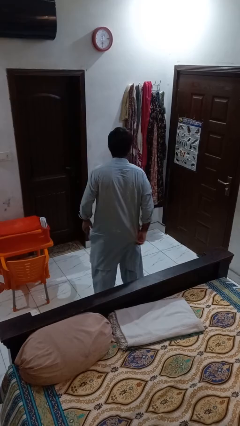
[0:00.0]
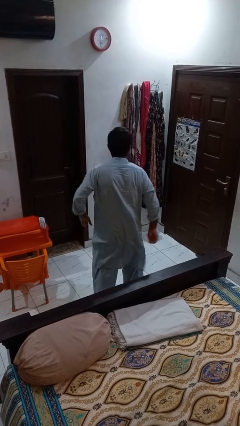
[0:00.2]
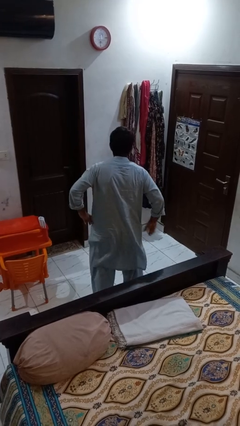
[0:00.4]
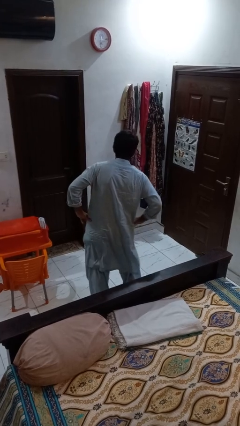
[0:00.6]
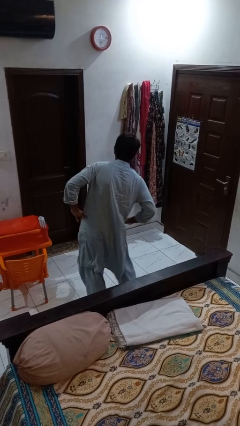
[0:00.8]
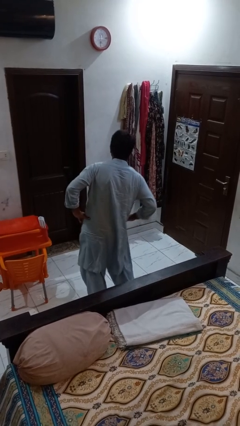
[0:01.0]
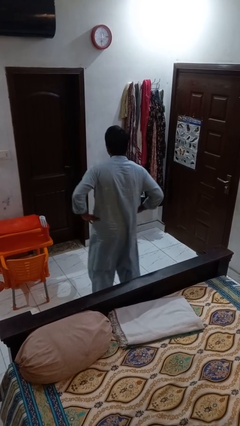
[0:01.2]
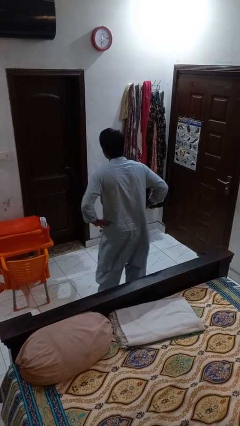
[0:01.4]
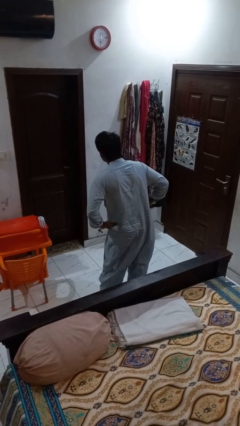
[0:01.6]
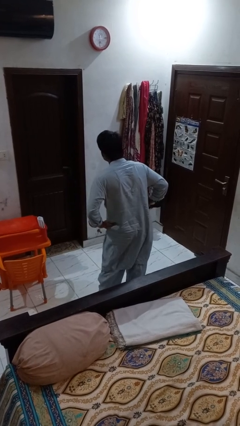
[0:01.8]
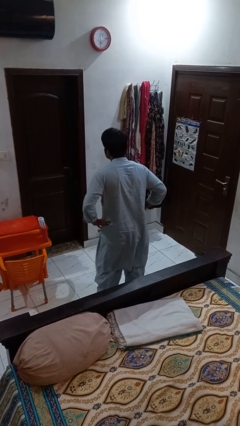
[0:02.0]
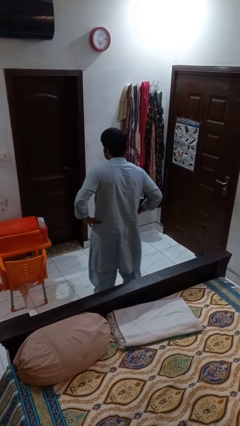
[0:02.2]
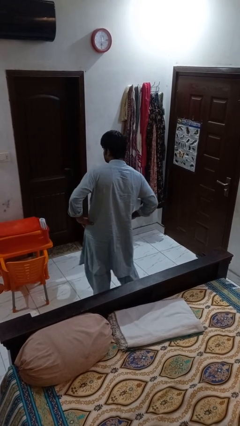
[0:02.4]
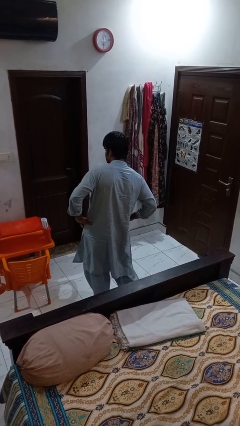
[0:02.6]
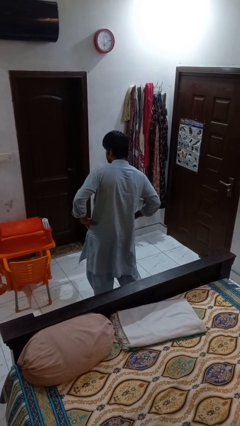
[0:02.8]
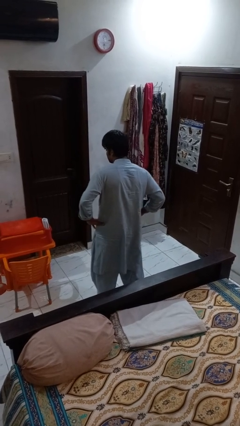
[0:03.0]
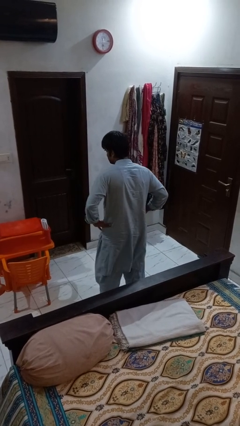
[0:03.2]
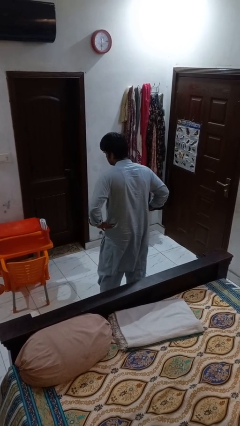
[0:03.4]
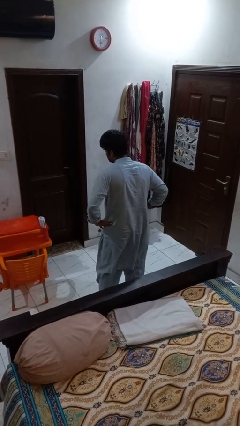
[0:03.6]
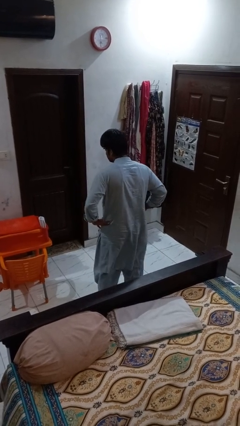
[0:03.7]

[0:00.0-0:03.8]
person wiggles hips

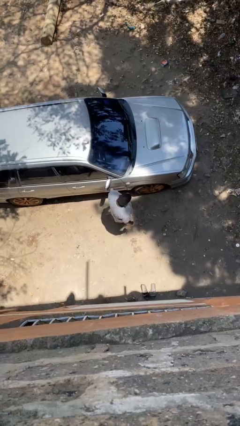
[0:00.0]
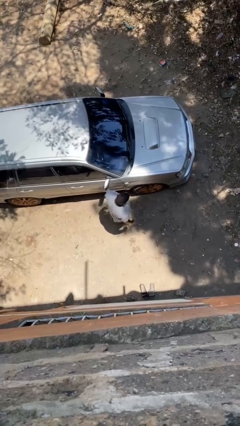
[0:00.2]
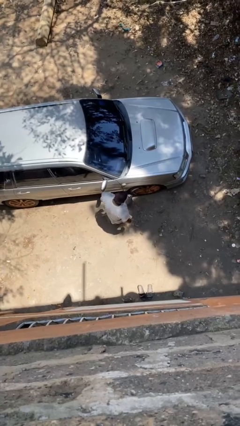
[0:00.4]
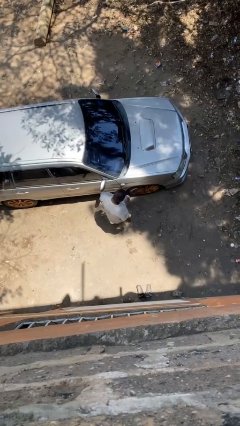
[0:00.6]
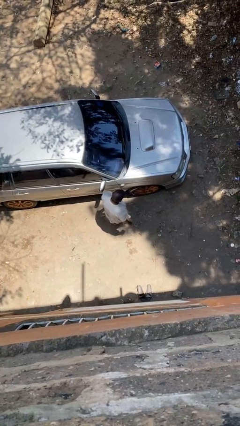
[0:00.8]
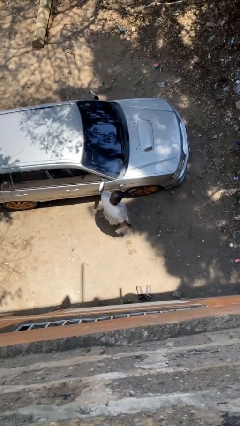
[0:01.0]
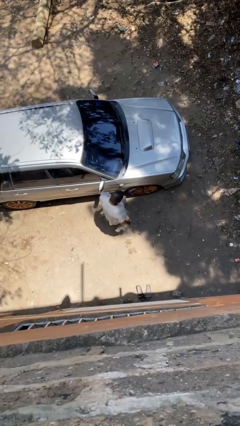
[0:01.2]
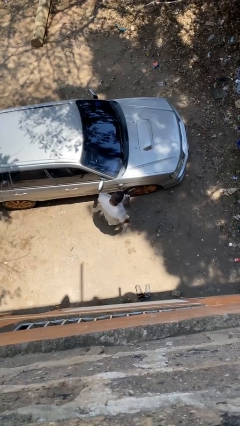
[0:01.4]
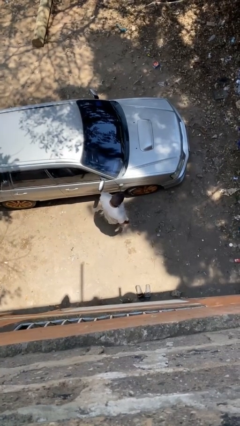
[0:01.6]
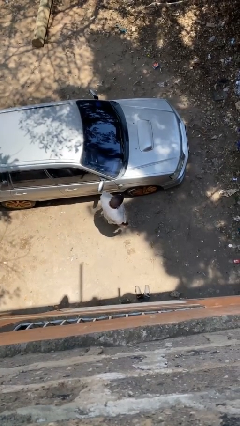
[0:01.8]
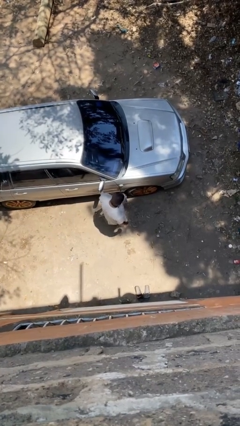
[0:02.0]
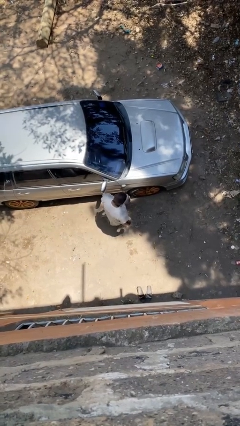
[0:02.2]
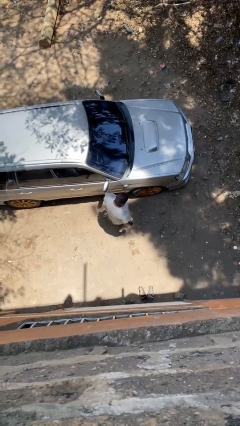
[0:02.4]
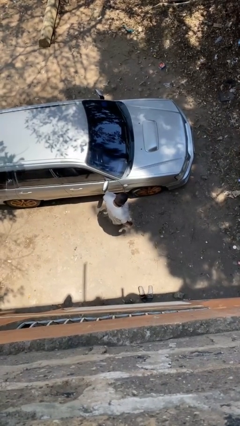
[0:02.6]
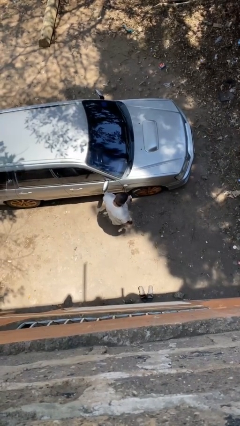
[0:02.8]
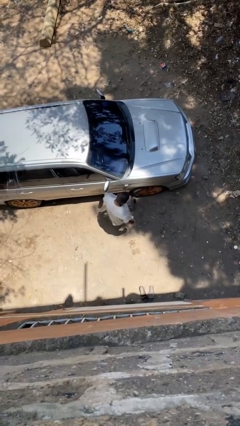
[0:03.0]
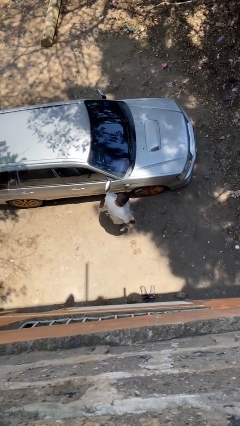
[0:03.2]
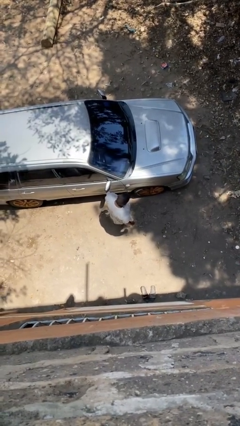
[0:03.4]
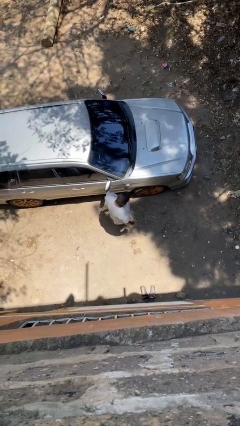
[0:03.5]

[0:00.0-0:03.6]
person kicks car tires

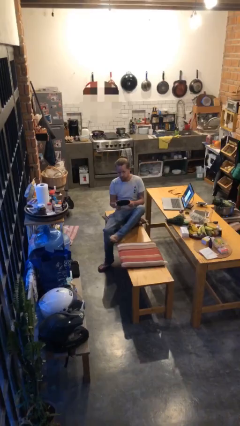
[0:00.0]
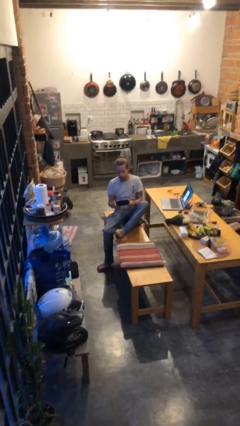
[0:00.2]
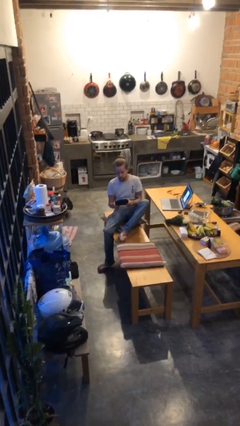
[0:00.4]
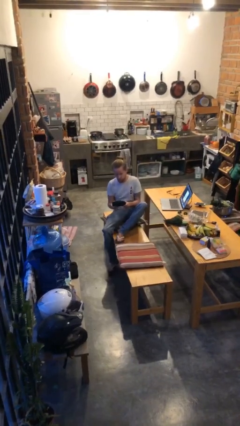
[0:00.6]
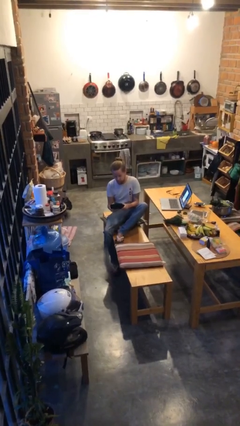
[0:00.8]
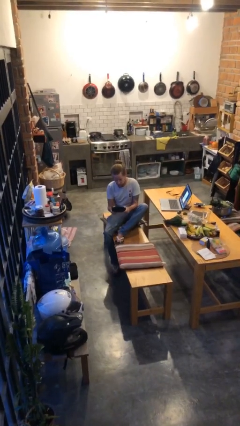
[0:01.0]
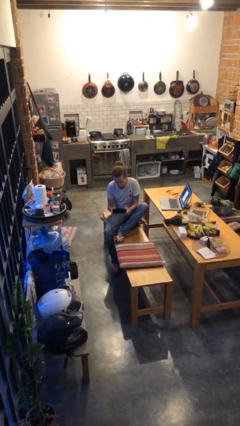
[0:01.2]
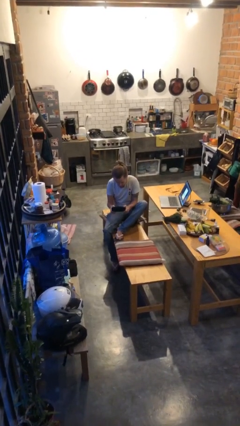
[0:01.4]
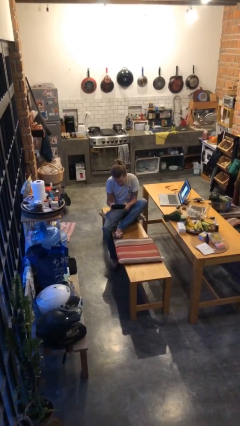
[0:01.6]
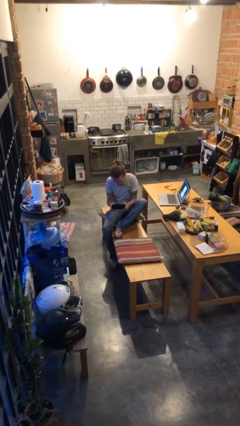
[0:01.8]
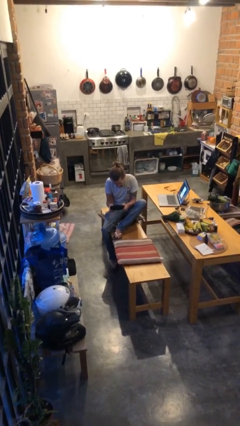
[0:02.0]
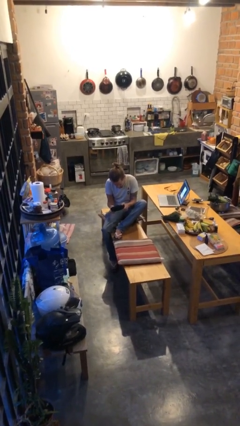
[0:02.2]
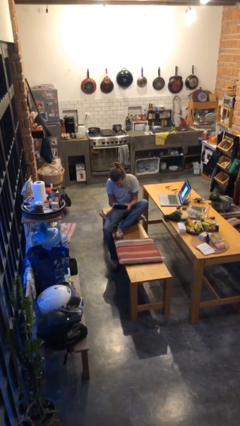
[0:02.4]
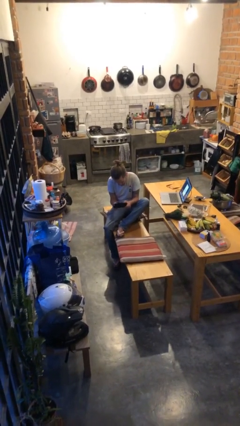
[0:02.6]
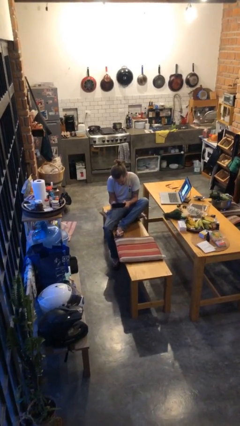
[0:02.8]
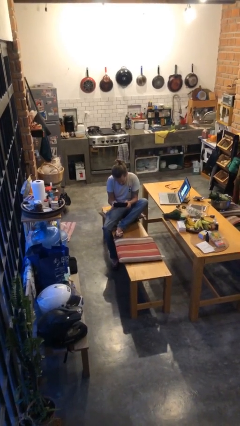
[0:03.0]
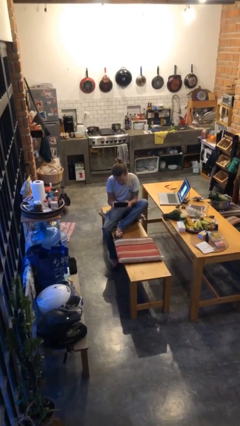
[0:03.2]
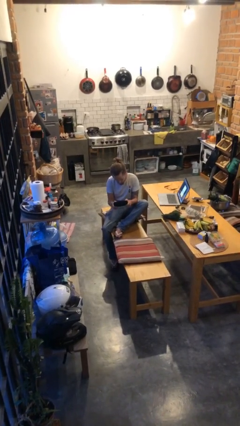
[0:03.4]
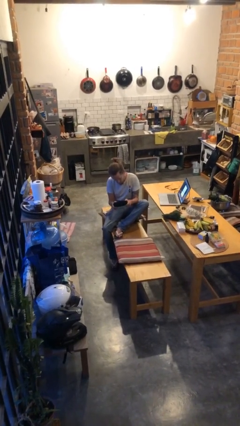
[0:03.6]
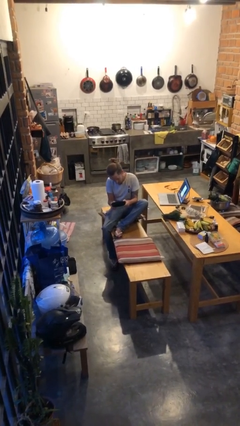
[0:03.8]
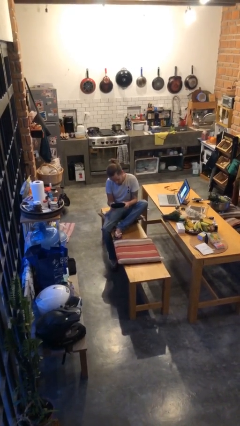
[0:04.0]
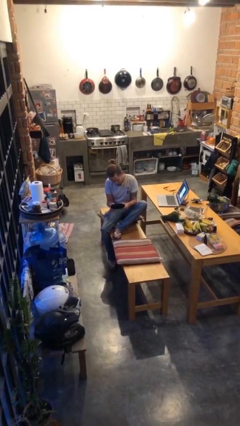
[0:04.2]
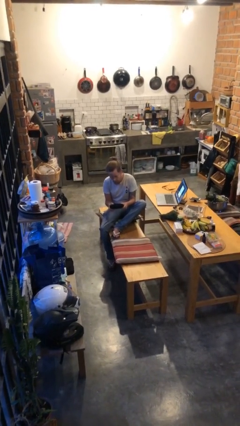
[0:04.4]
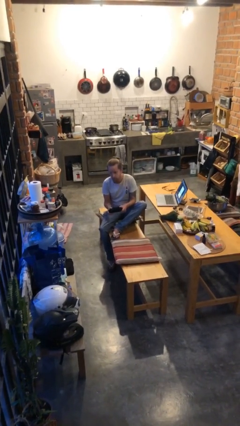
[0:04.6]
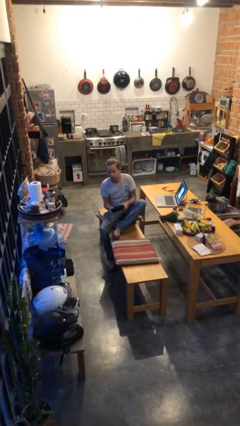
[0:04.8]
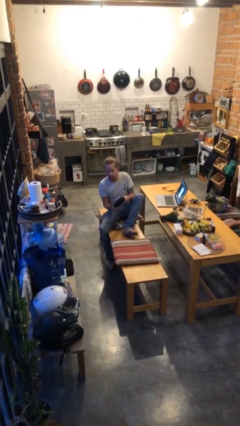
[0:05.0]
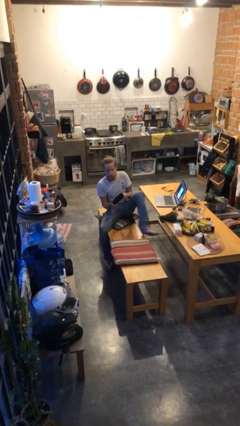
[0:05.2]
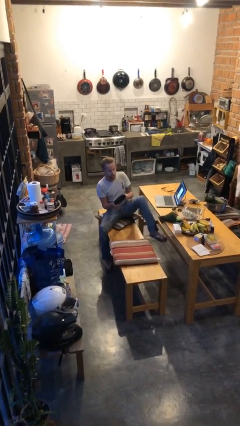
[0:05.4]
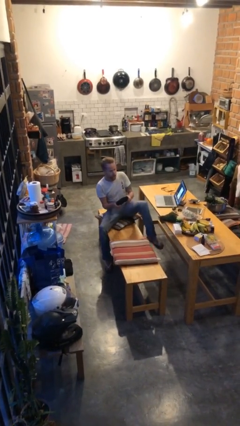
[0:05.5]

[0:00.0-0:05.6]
person interacts with handheld game

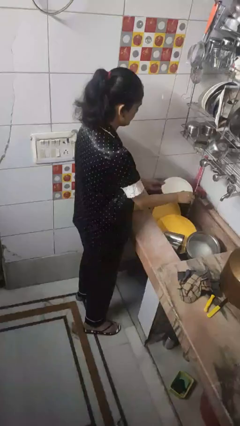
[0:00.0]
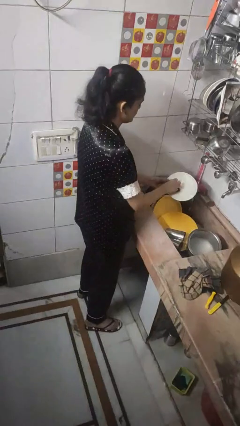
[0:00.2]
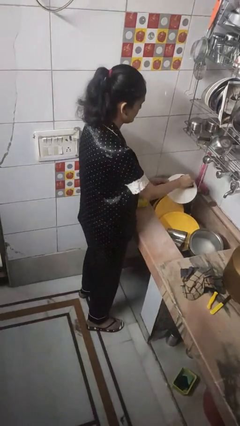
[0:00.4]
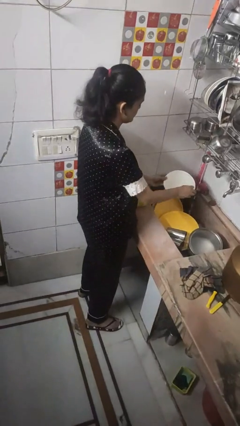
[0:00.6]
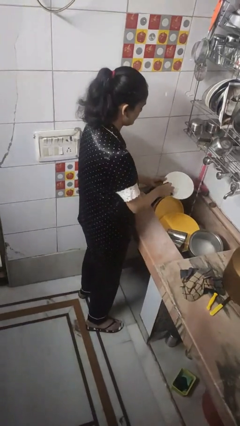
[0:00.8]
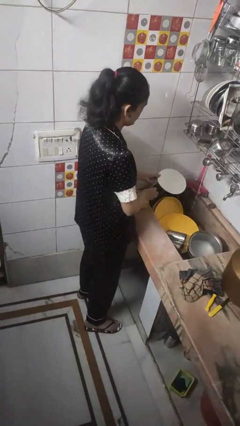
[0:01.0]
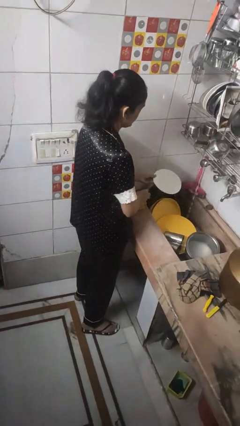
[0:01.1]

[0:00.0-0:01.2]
person washes dish

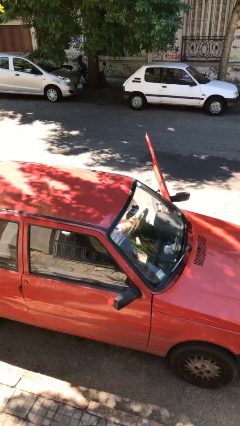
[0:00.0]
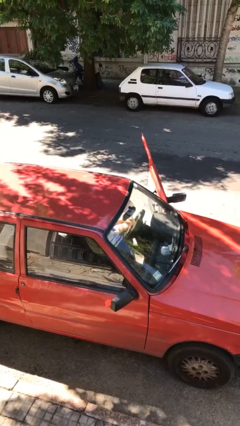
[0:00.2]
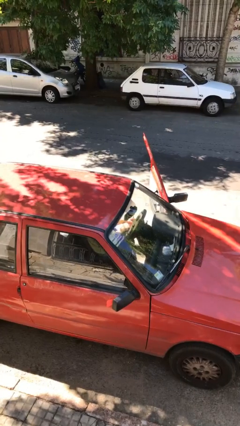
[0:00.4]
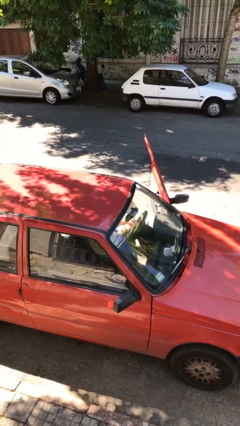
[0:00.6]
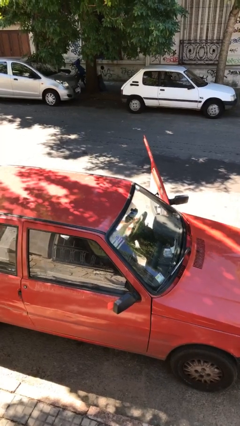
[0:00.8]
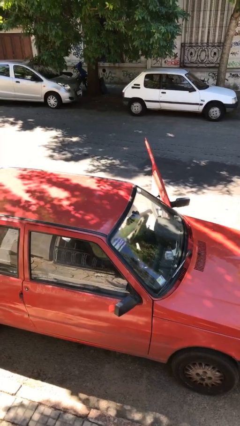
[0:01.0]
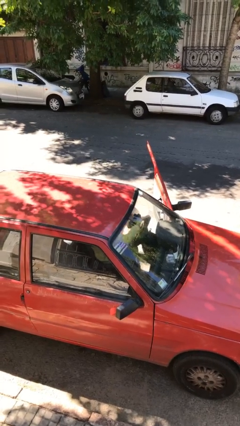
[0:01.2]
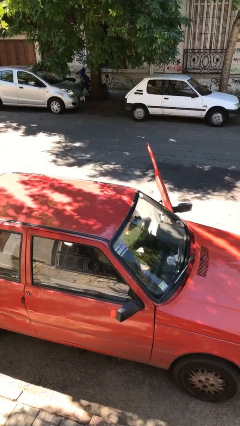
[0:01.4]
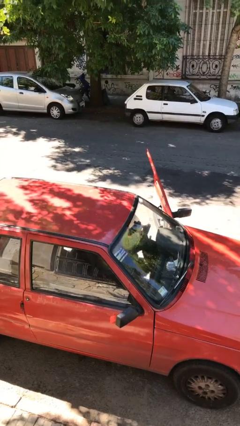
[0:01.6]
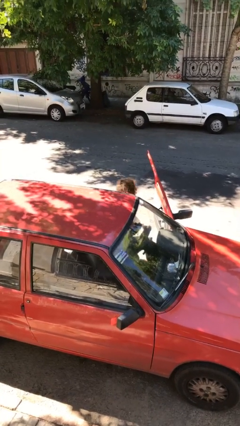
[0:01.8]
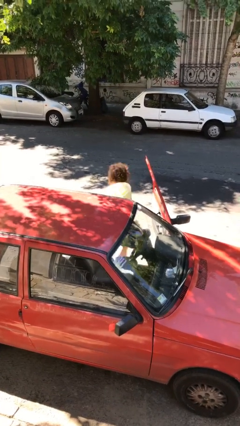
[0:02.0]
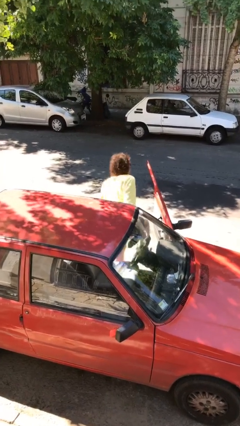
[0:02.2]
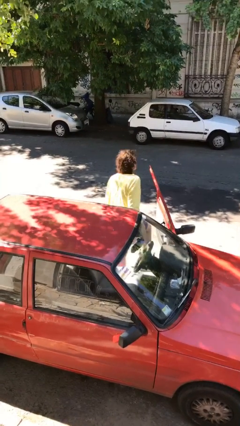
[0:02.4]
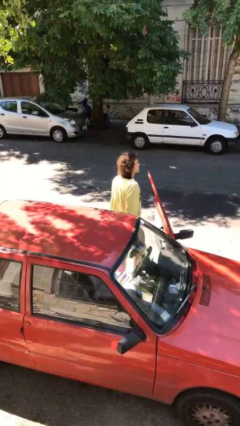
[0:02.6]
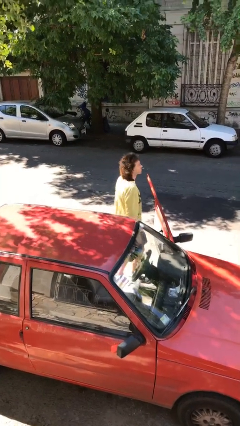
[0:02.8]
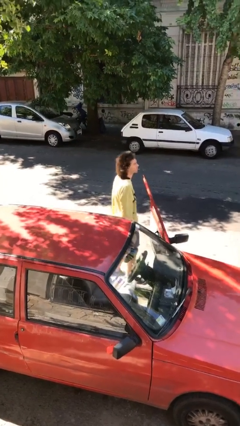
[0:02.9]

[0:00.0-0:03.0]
person exits car

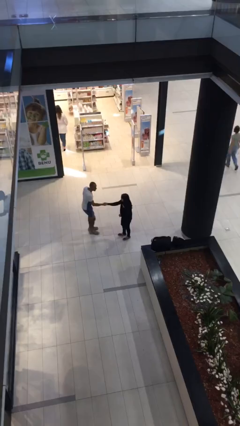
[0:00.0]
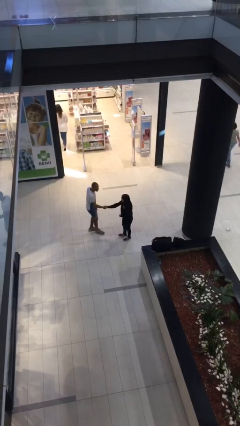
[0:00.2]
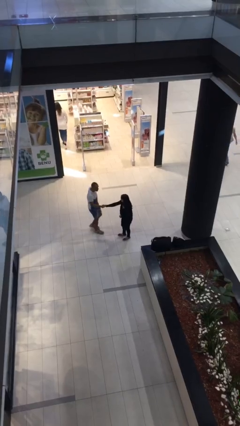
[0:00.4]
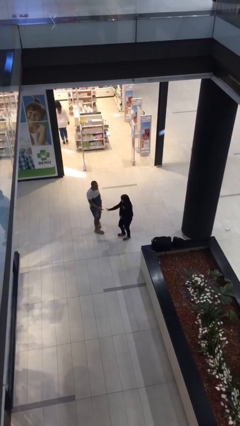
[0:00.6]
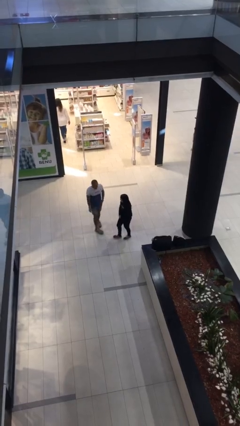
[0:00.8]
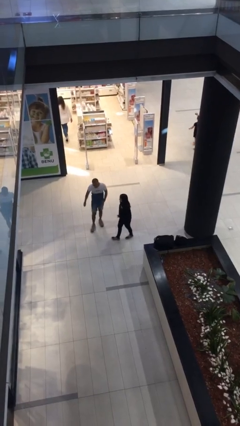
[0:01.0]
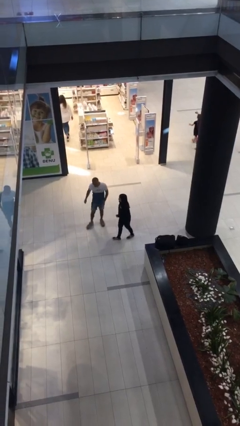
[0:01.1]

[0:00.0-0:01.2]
person shakes hand
